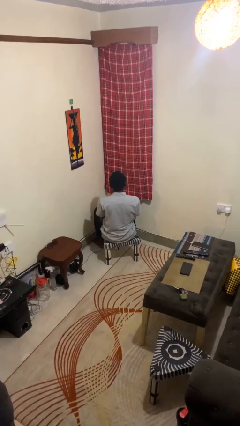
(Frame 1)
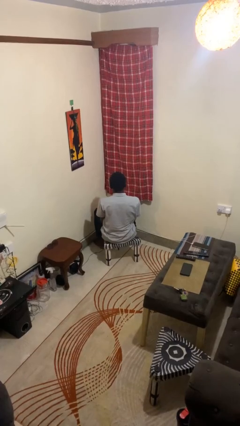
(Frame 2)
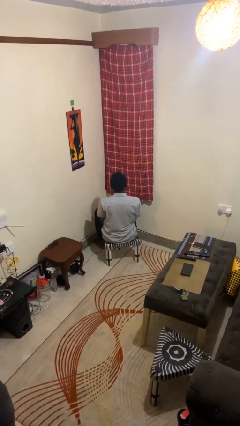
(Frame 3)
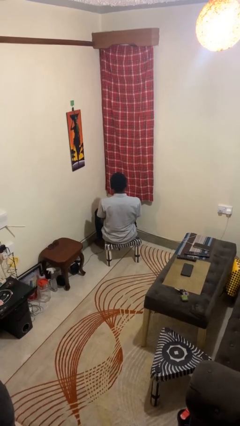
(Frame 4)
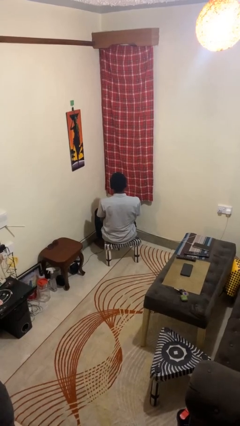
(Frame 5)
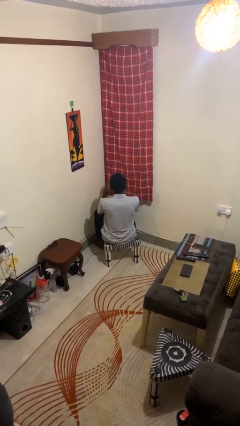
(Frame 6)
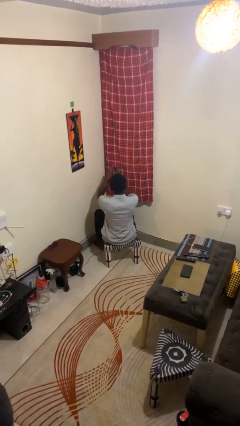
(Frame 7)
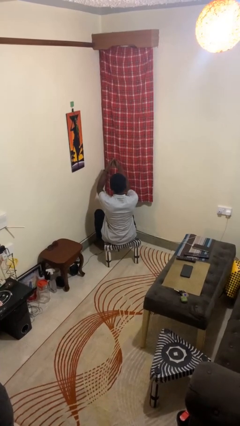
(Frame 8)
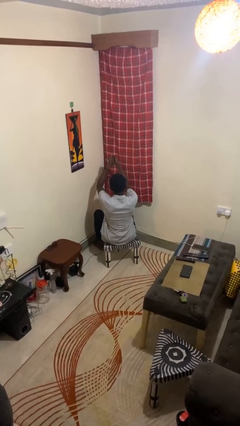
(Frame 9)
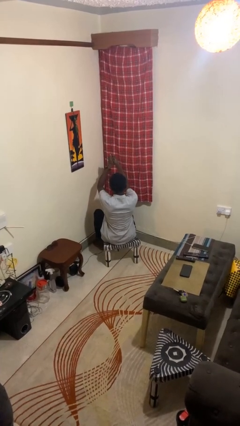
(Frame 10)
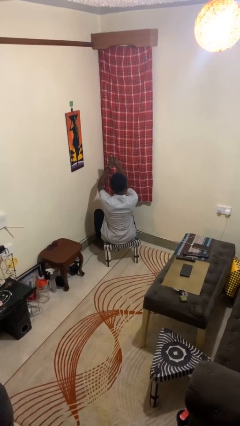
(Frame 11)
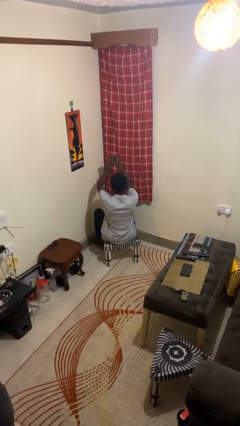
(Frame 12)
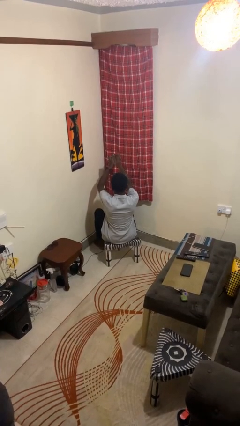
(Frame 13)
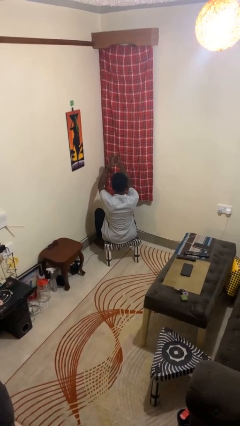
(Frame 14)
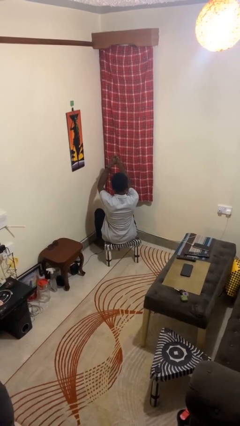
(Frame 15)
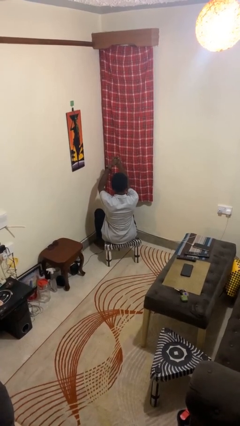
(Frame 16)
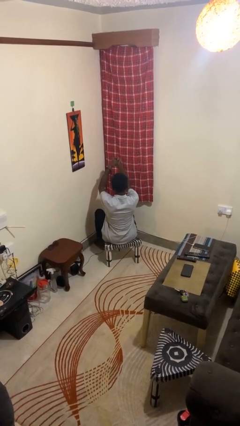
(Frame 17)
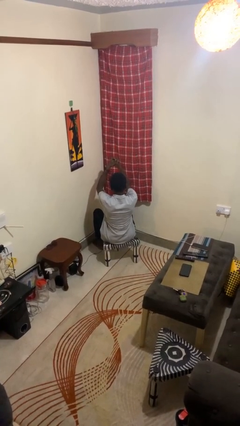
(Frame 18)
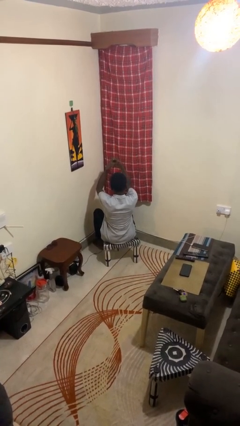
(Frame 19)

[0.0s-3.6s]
person cracks knuckles

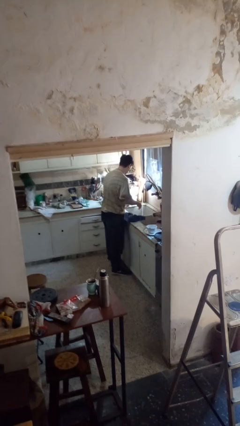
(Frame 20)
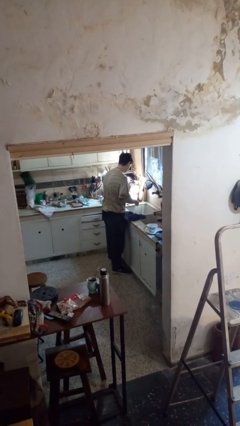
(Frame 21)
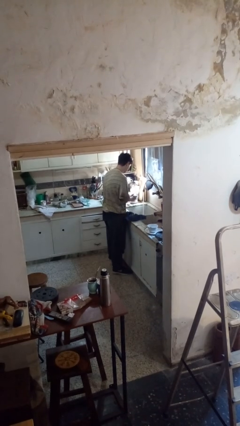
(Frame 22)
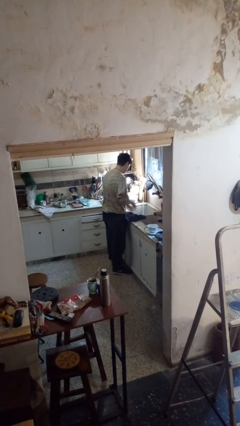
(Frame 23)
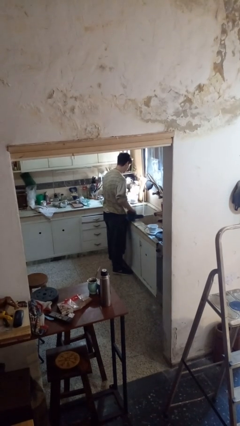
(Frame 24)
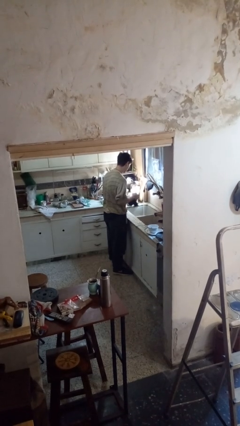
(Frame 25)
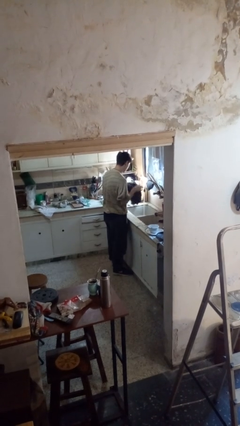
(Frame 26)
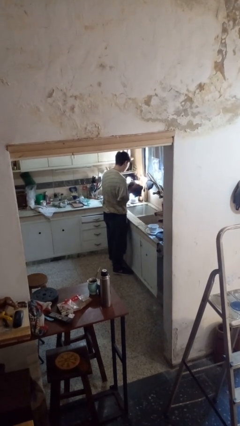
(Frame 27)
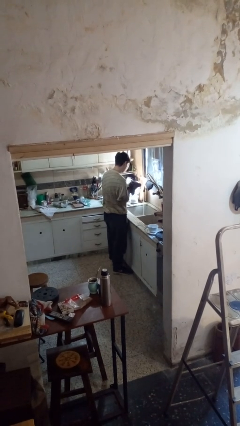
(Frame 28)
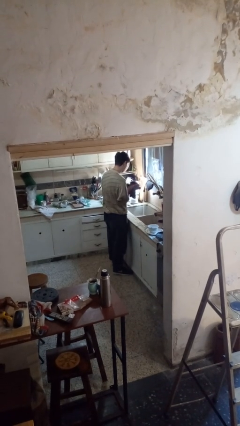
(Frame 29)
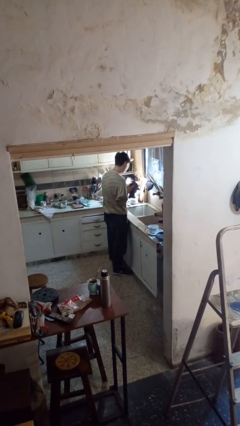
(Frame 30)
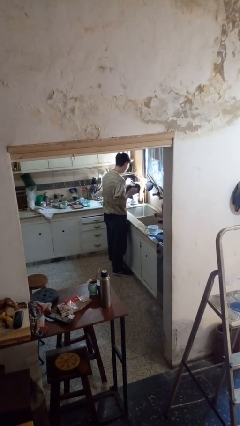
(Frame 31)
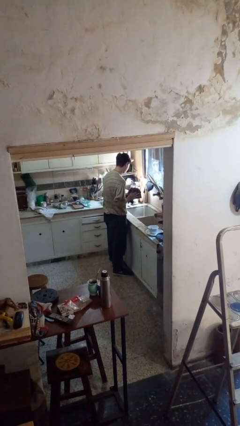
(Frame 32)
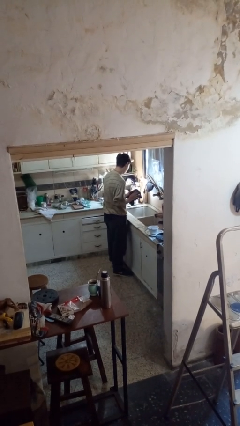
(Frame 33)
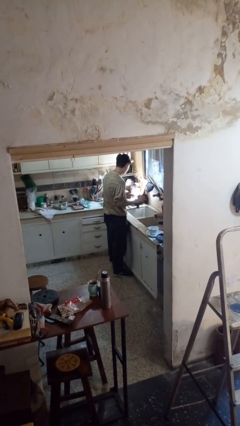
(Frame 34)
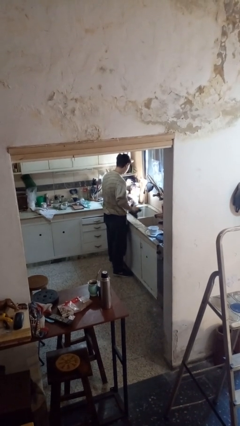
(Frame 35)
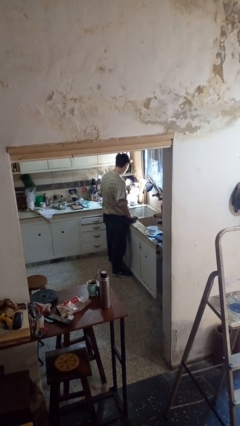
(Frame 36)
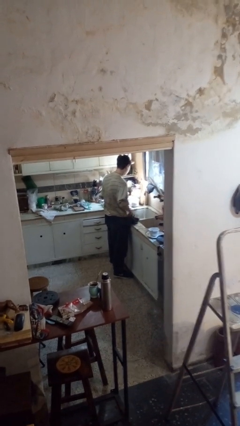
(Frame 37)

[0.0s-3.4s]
person dries hands with towel

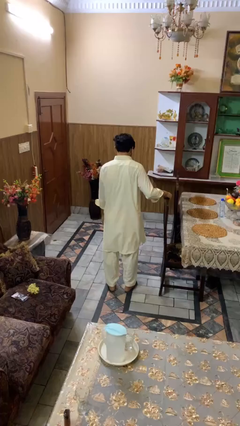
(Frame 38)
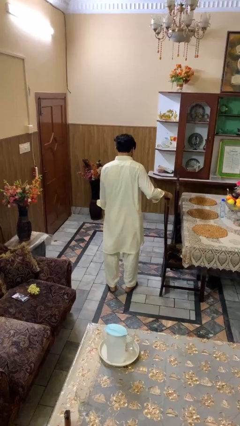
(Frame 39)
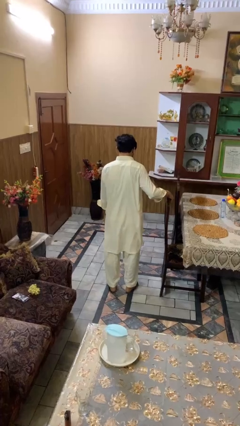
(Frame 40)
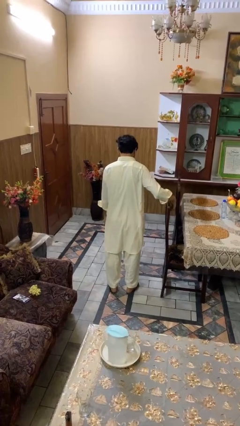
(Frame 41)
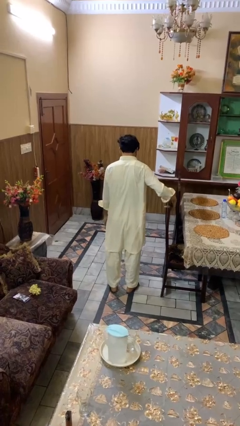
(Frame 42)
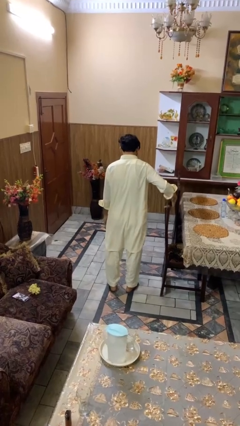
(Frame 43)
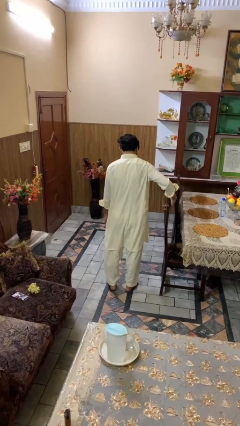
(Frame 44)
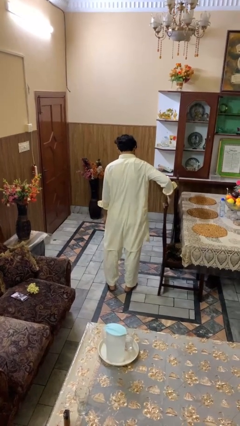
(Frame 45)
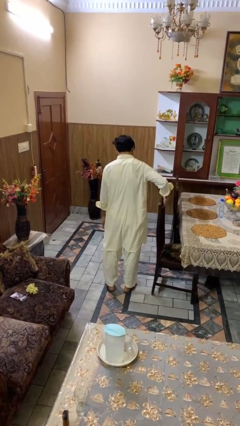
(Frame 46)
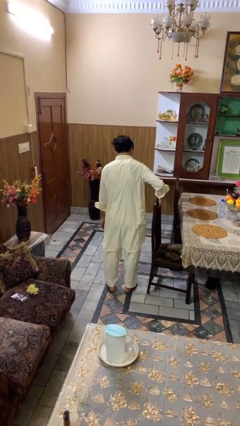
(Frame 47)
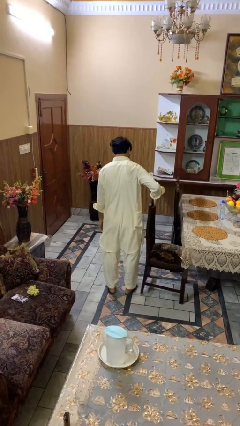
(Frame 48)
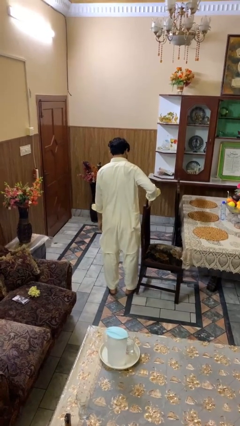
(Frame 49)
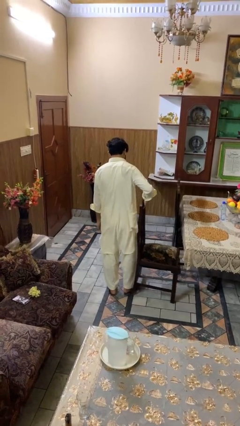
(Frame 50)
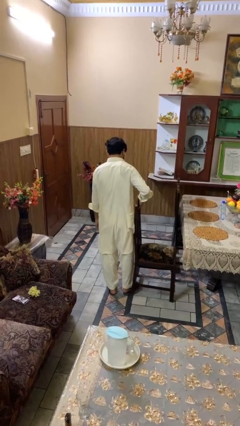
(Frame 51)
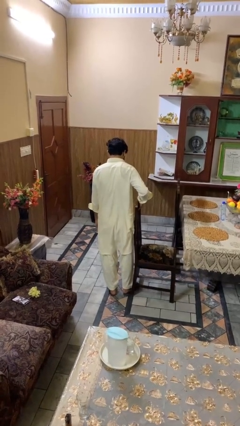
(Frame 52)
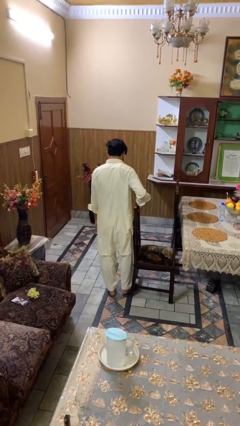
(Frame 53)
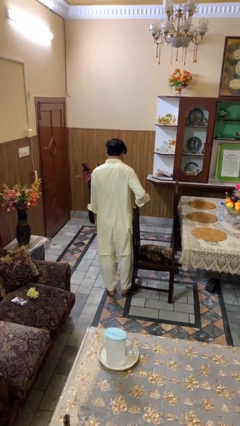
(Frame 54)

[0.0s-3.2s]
person pulls out chair

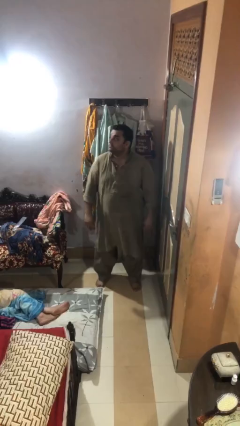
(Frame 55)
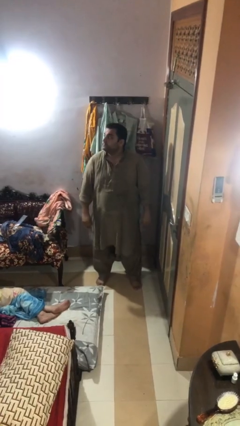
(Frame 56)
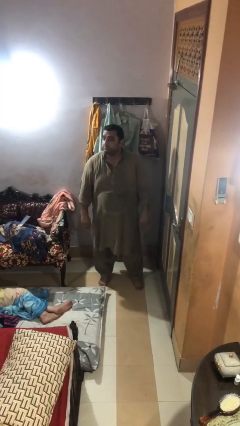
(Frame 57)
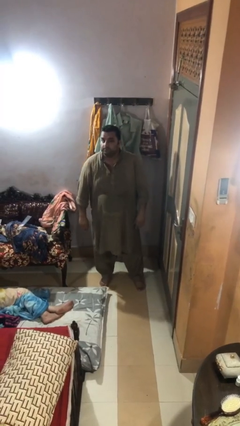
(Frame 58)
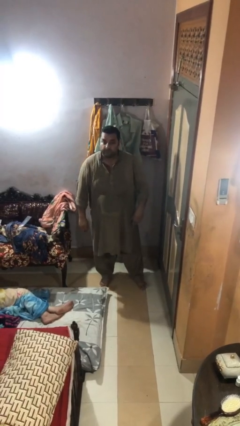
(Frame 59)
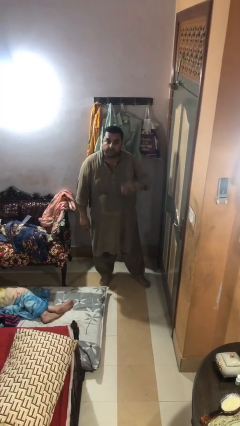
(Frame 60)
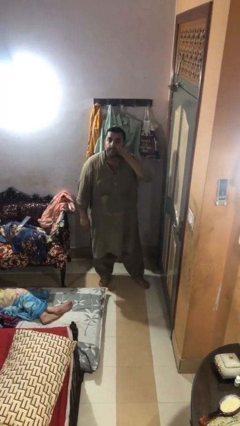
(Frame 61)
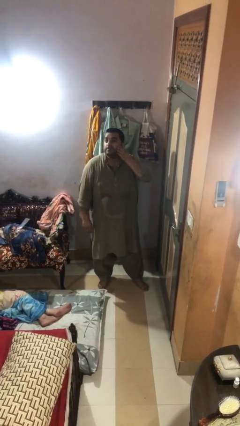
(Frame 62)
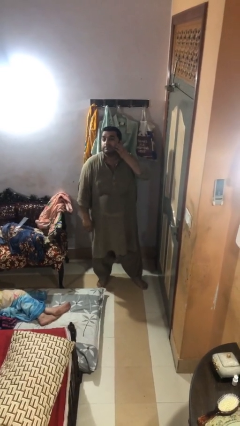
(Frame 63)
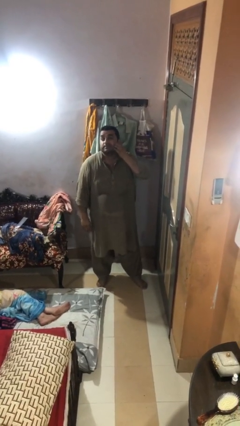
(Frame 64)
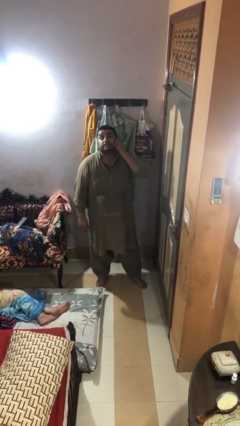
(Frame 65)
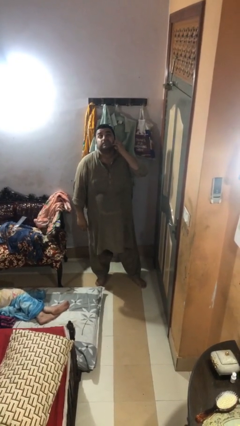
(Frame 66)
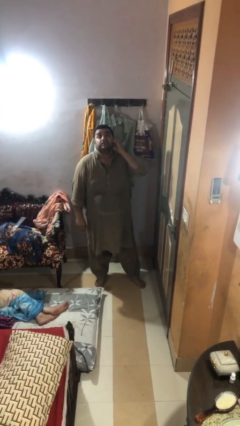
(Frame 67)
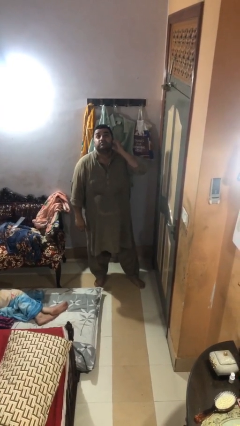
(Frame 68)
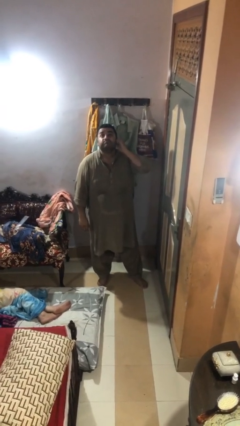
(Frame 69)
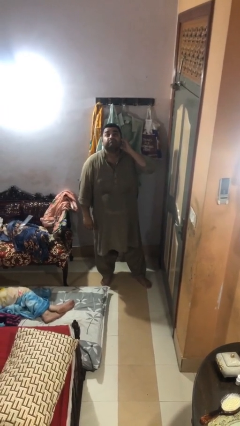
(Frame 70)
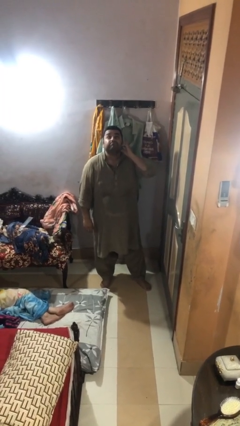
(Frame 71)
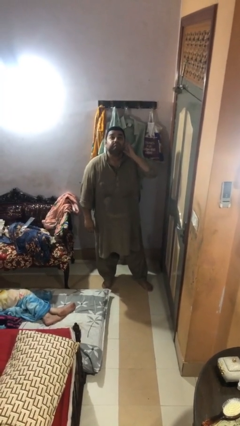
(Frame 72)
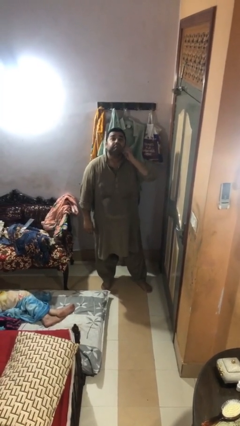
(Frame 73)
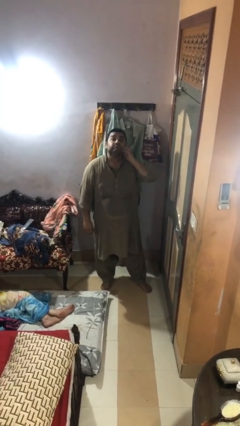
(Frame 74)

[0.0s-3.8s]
person scratches face

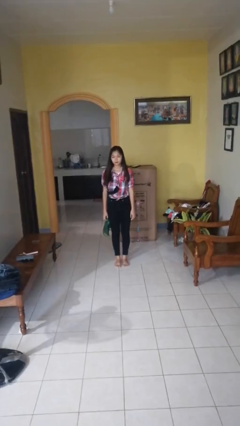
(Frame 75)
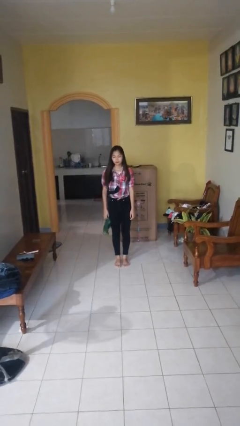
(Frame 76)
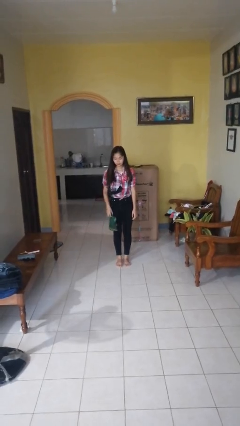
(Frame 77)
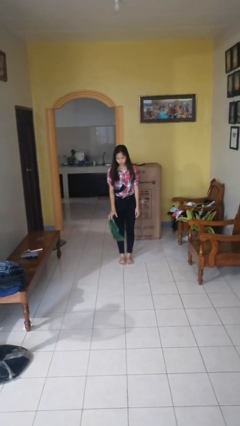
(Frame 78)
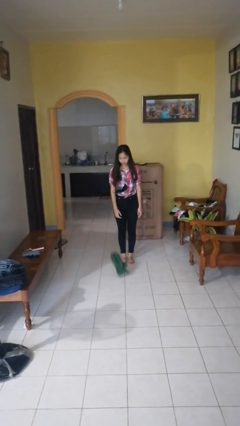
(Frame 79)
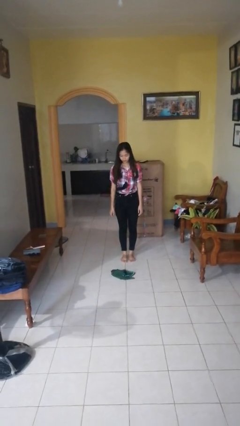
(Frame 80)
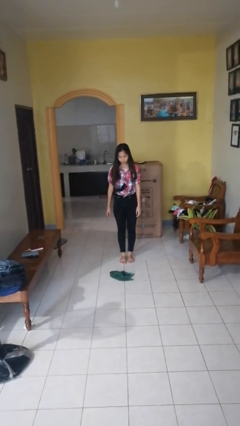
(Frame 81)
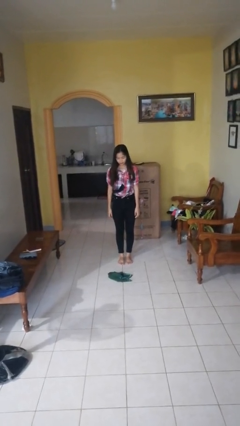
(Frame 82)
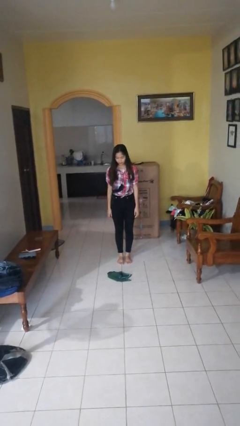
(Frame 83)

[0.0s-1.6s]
person throws object into air

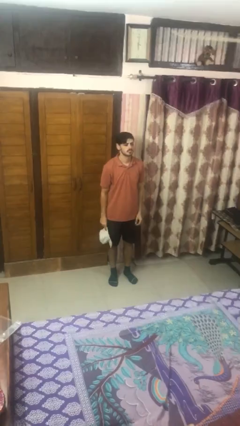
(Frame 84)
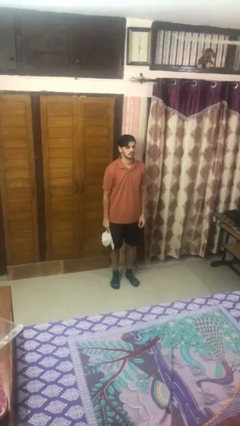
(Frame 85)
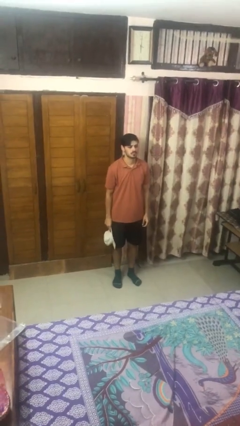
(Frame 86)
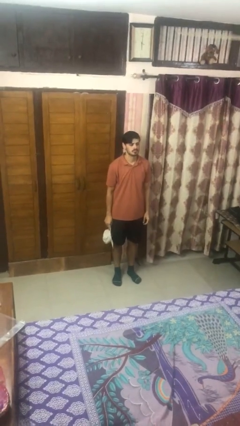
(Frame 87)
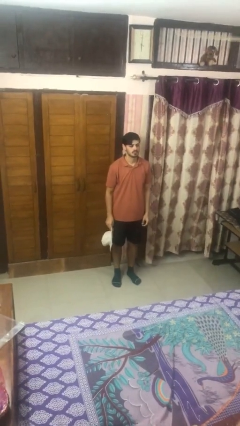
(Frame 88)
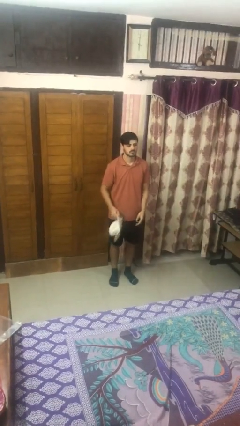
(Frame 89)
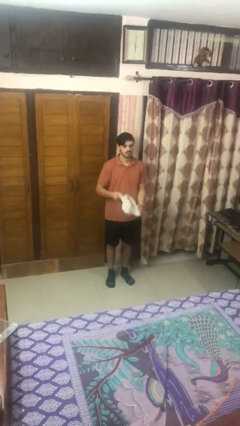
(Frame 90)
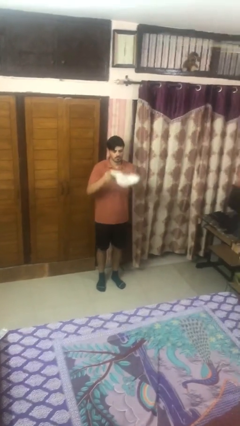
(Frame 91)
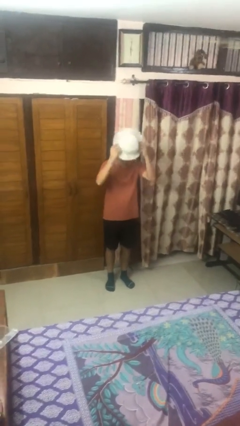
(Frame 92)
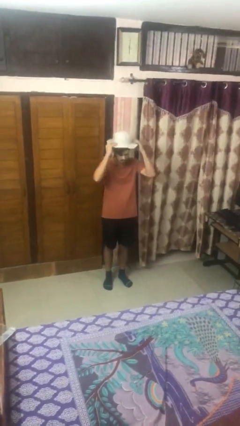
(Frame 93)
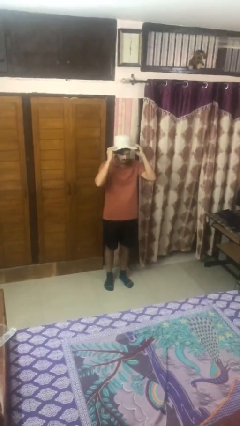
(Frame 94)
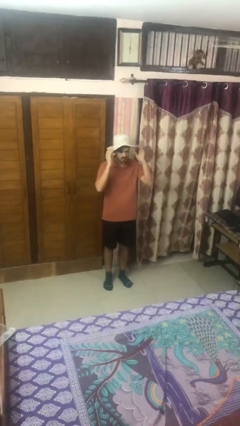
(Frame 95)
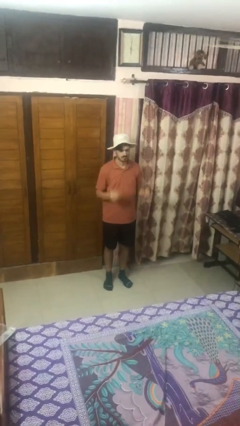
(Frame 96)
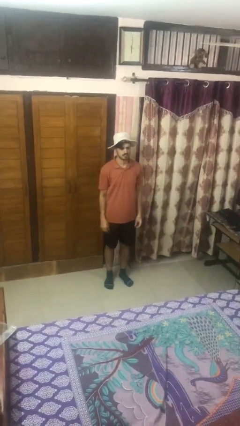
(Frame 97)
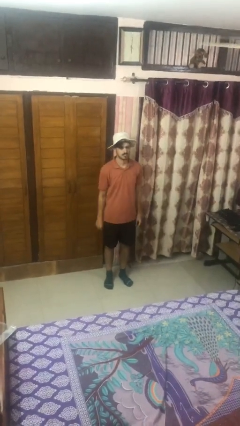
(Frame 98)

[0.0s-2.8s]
person puts on hat
